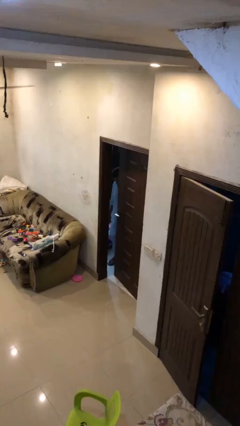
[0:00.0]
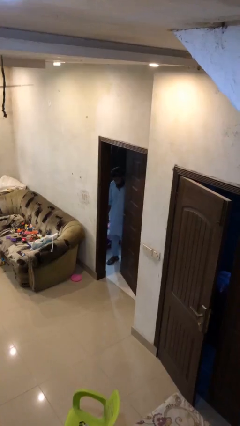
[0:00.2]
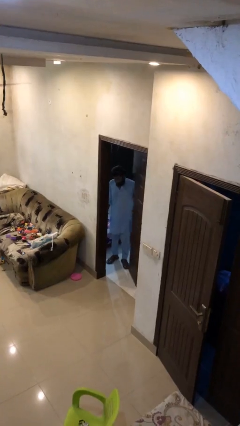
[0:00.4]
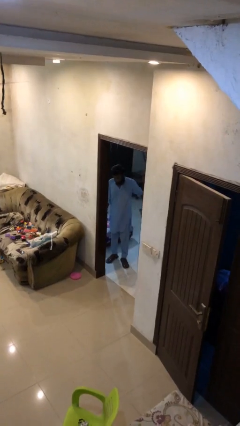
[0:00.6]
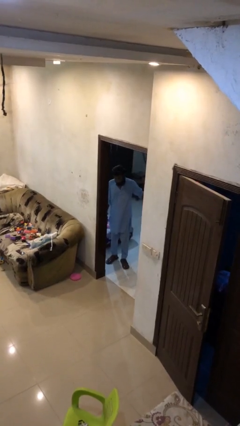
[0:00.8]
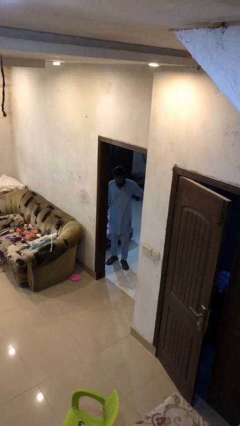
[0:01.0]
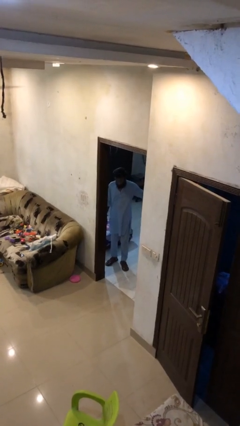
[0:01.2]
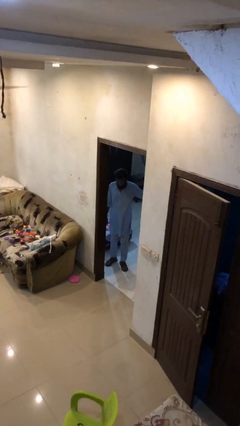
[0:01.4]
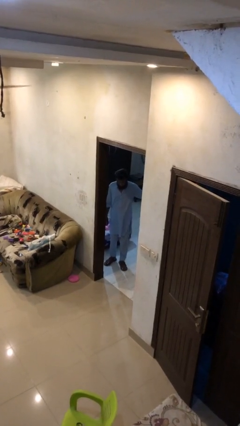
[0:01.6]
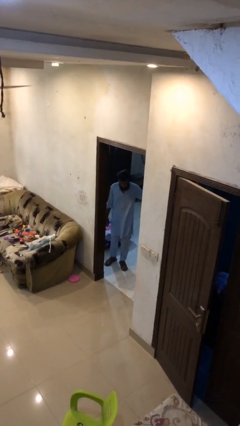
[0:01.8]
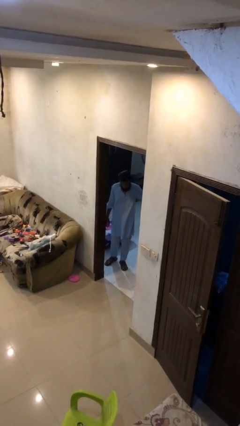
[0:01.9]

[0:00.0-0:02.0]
person opens facility door

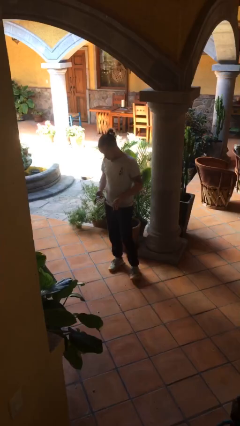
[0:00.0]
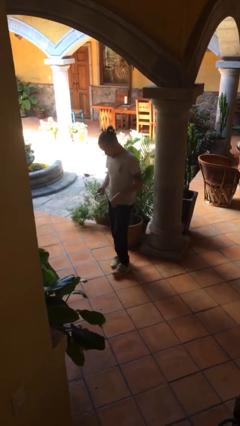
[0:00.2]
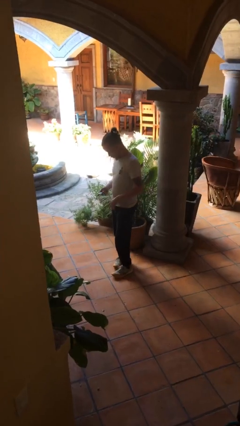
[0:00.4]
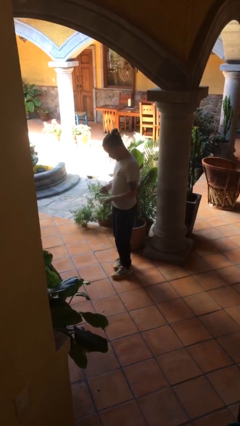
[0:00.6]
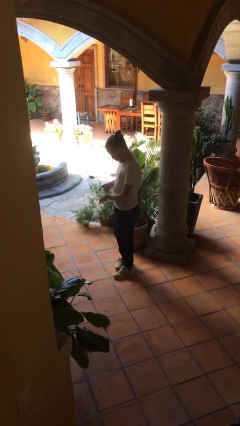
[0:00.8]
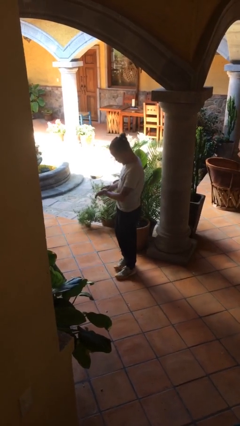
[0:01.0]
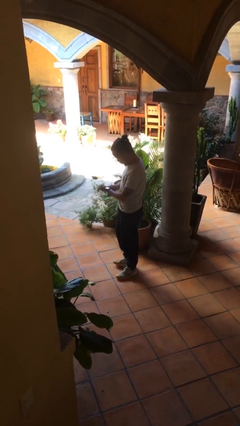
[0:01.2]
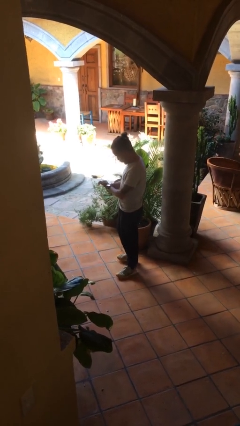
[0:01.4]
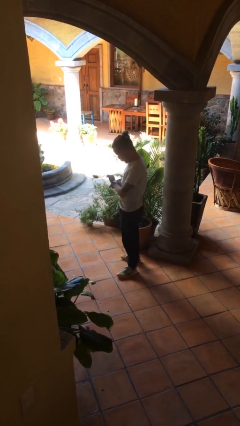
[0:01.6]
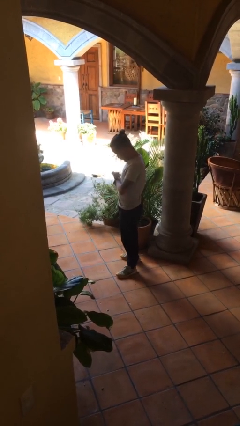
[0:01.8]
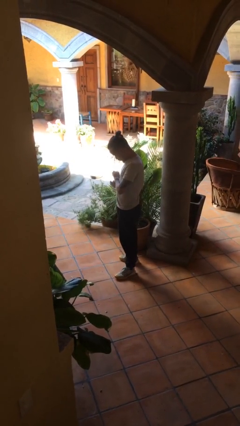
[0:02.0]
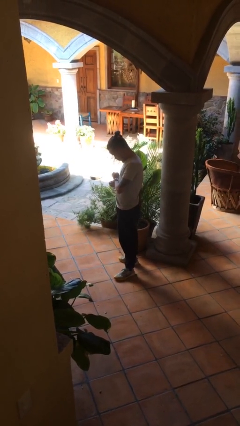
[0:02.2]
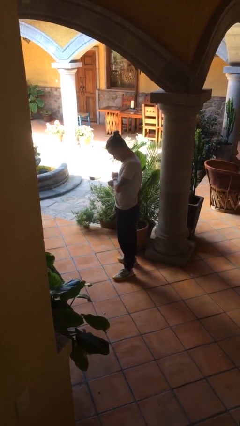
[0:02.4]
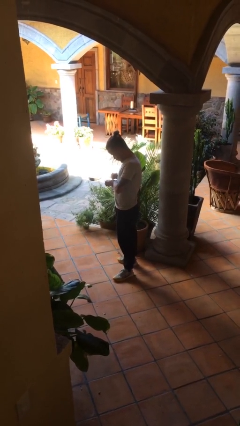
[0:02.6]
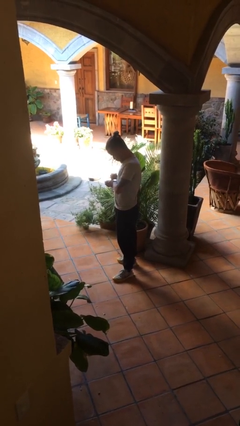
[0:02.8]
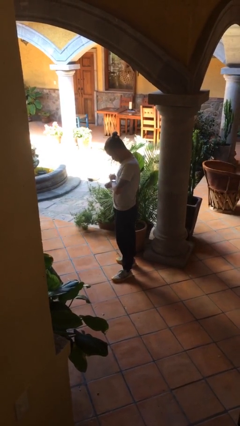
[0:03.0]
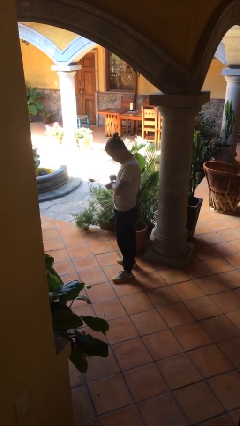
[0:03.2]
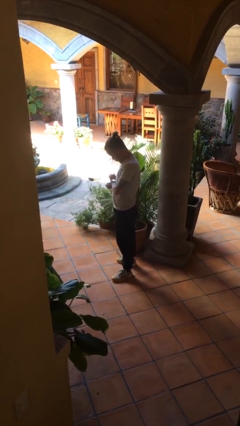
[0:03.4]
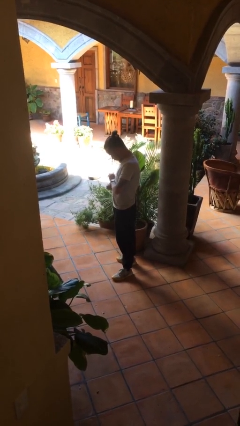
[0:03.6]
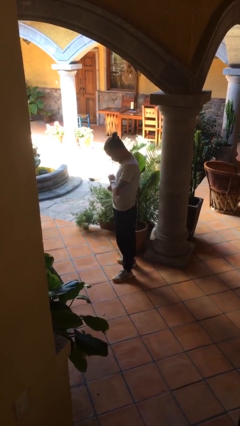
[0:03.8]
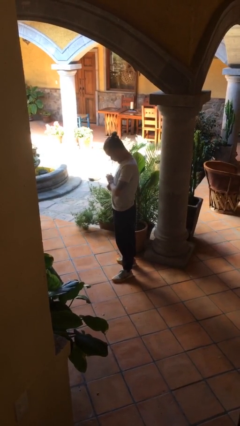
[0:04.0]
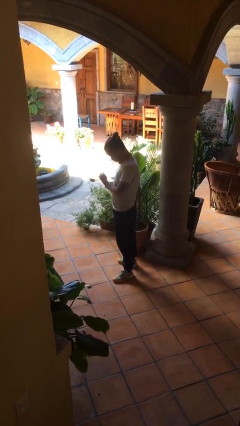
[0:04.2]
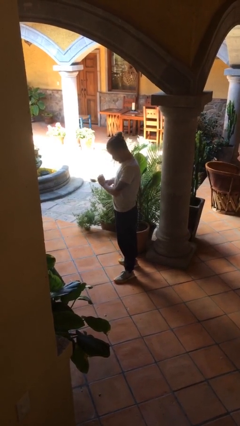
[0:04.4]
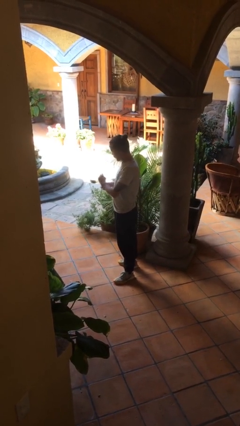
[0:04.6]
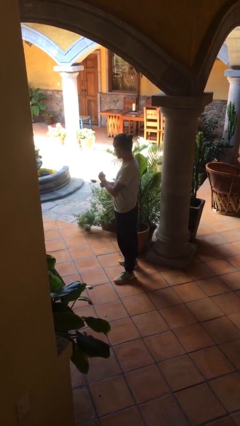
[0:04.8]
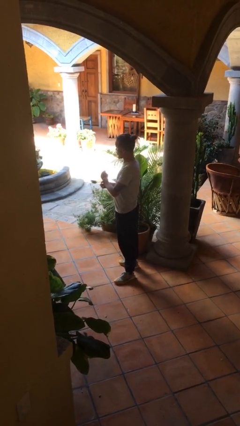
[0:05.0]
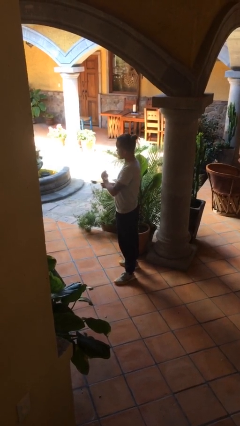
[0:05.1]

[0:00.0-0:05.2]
person puts on wristwatch

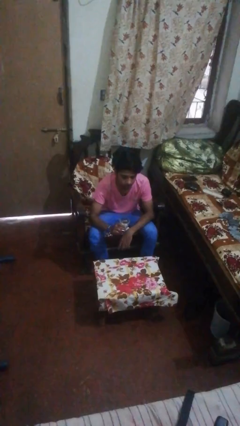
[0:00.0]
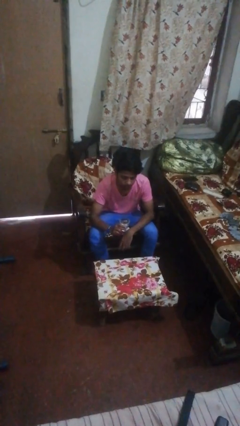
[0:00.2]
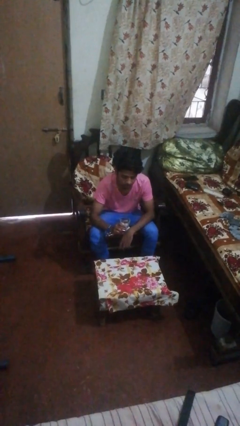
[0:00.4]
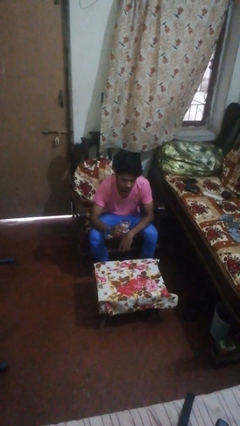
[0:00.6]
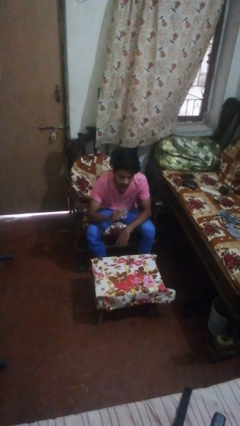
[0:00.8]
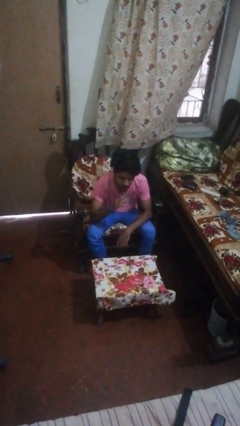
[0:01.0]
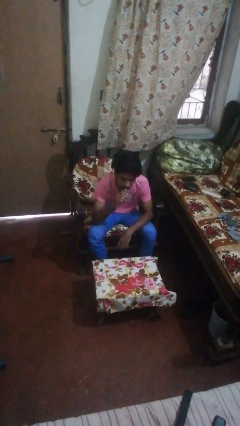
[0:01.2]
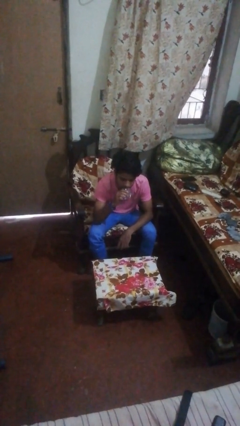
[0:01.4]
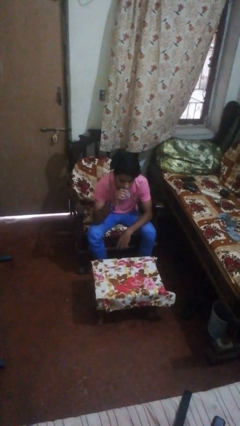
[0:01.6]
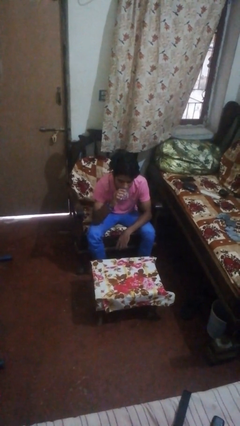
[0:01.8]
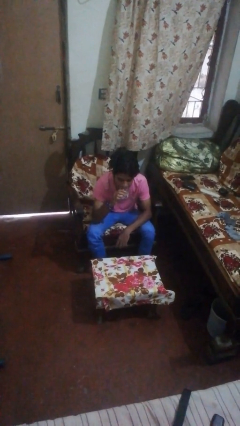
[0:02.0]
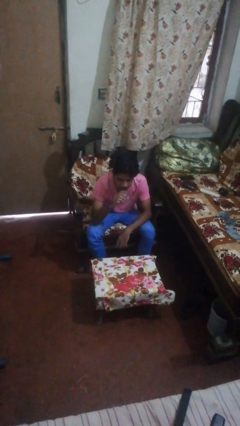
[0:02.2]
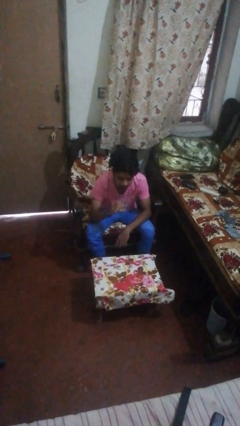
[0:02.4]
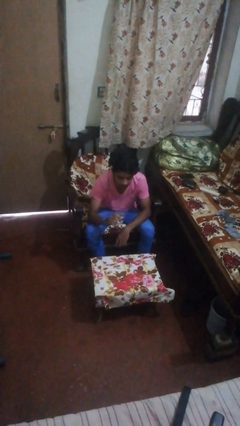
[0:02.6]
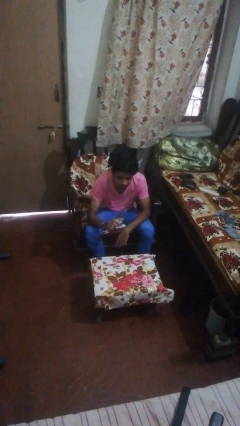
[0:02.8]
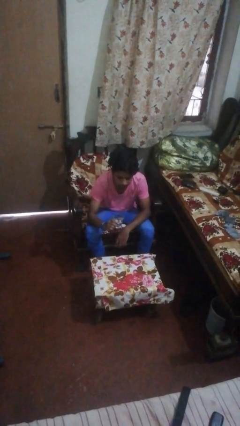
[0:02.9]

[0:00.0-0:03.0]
person drinks from shotglass

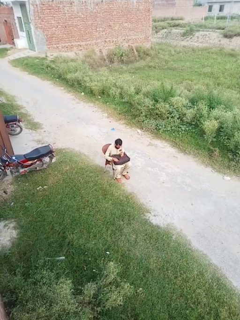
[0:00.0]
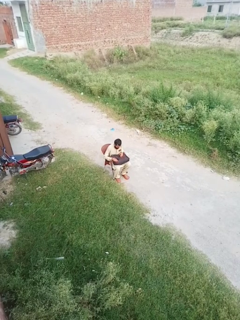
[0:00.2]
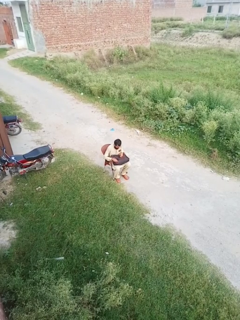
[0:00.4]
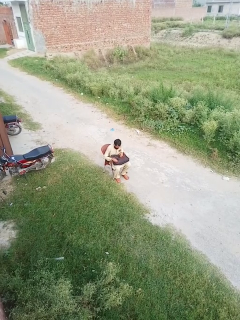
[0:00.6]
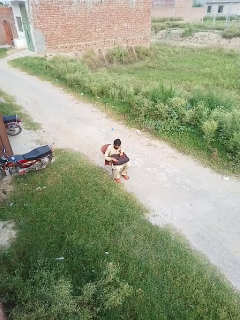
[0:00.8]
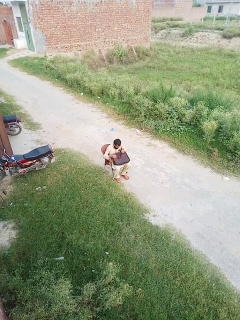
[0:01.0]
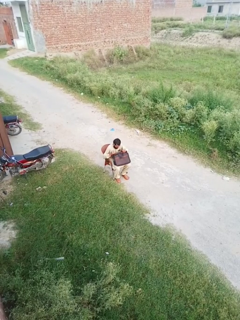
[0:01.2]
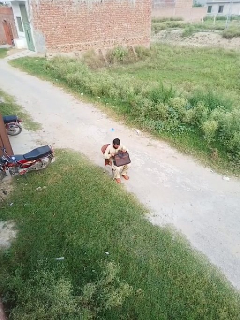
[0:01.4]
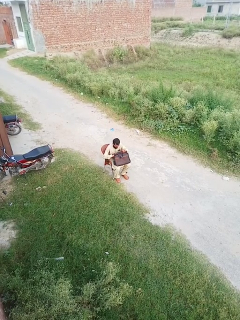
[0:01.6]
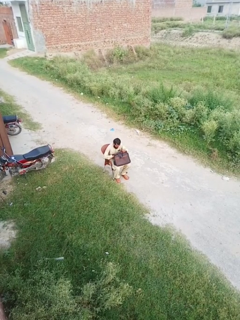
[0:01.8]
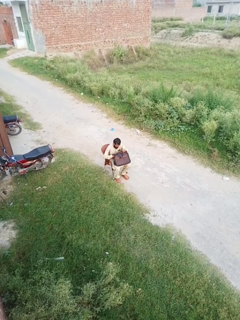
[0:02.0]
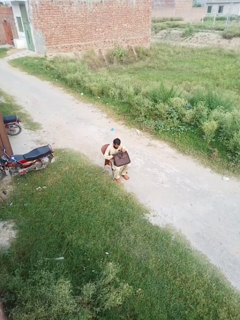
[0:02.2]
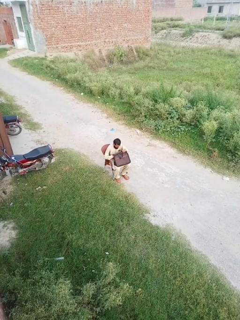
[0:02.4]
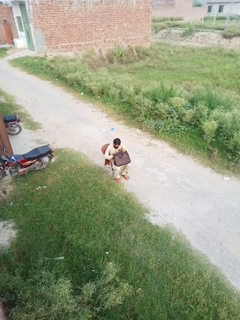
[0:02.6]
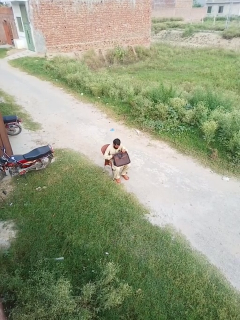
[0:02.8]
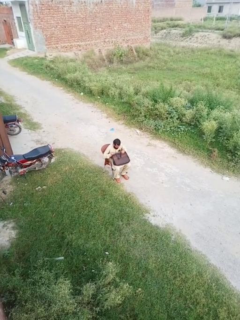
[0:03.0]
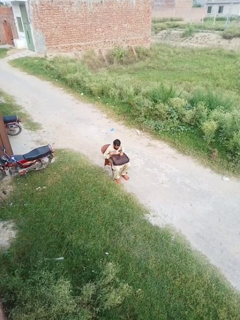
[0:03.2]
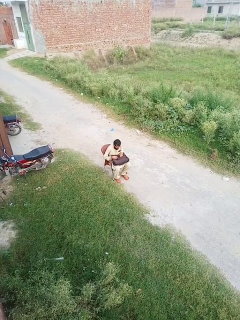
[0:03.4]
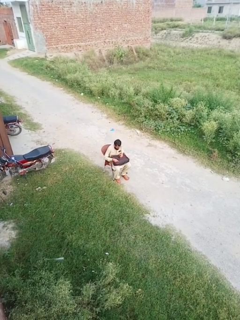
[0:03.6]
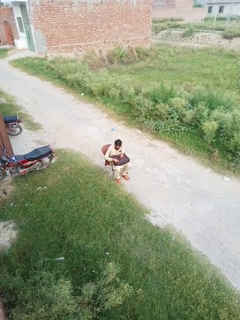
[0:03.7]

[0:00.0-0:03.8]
person searches in bag

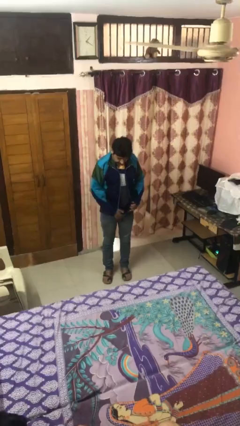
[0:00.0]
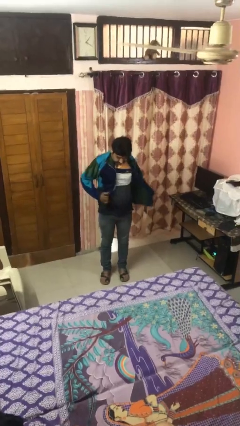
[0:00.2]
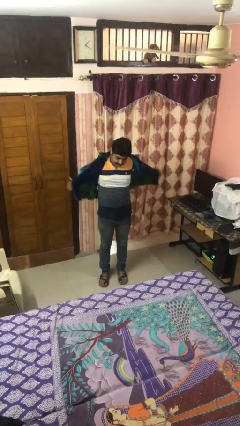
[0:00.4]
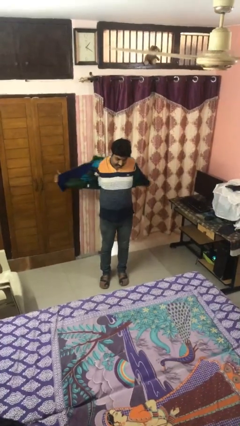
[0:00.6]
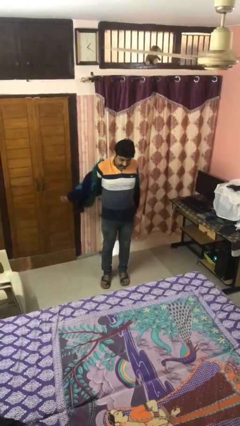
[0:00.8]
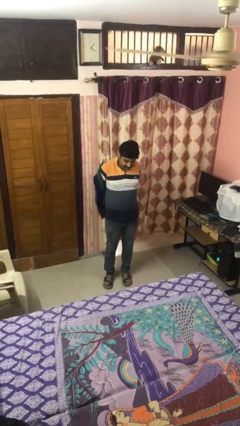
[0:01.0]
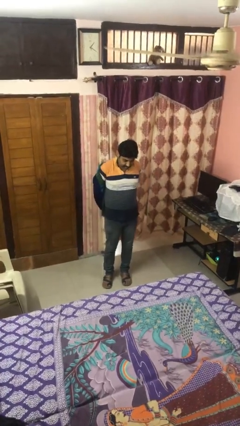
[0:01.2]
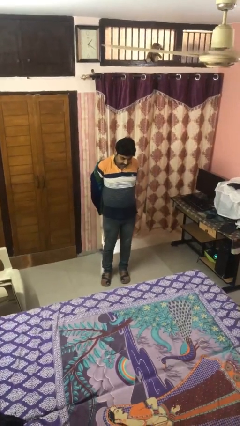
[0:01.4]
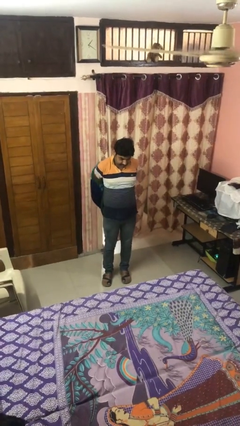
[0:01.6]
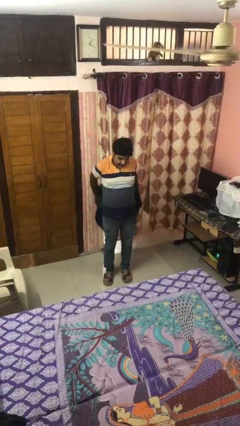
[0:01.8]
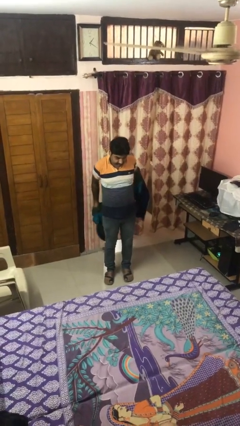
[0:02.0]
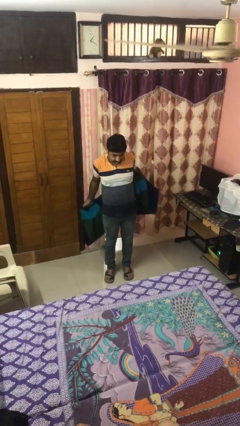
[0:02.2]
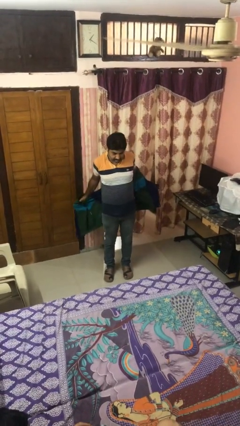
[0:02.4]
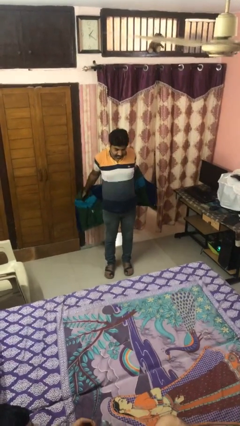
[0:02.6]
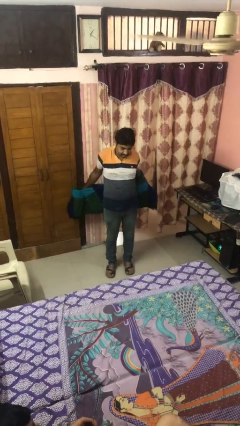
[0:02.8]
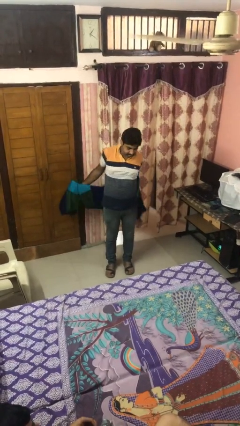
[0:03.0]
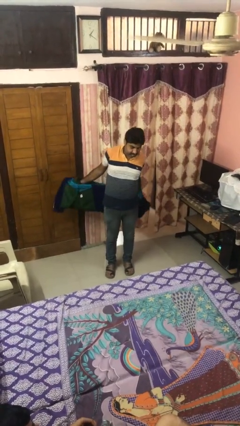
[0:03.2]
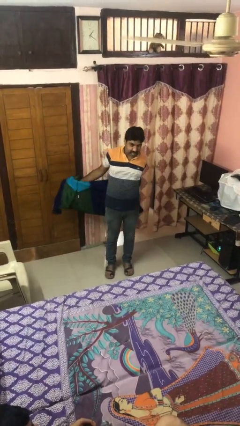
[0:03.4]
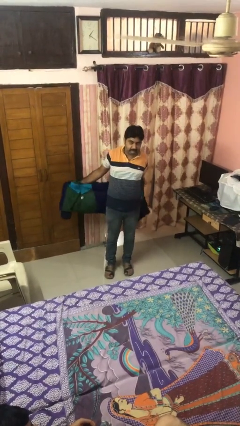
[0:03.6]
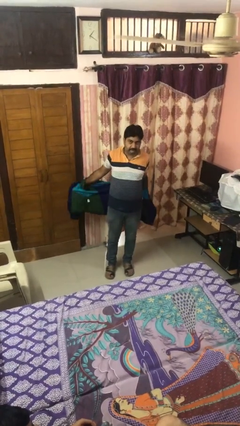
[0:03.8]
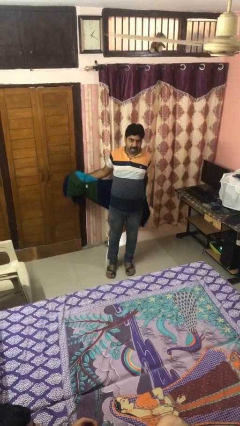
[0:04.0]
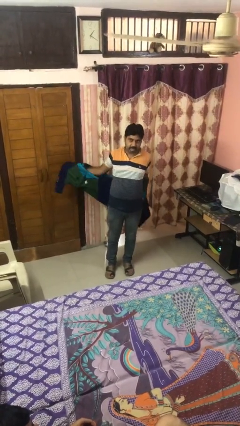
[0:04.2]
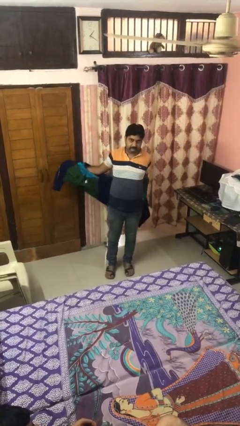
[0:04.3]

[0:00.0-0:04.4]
person takes off jacket
